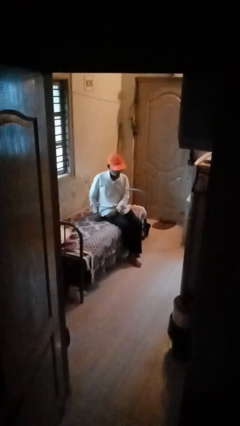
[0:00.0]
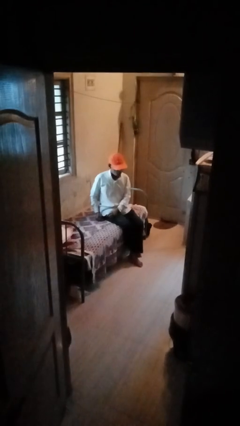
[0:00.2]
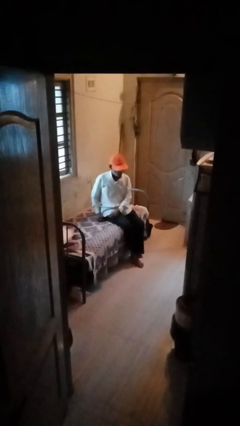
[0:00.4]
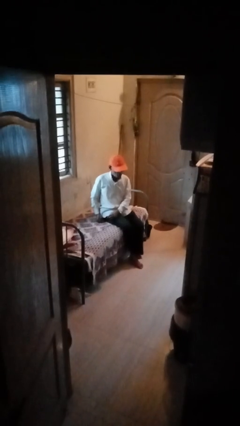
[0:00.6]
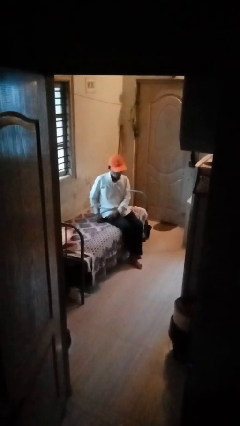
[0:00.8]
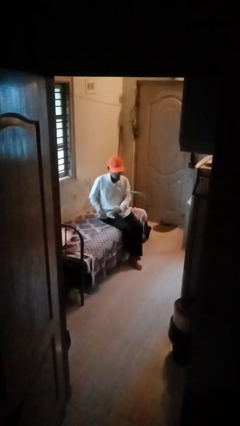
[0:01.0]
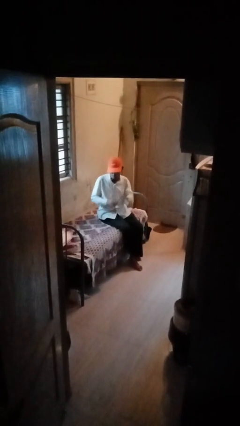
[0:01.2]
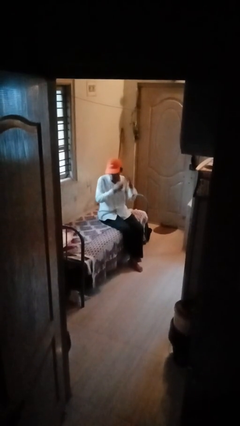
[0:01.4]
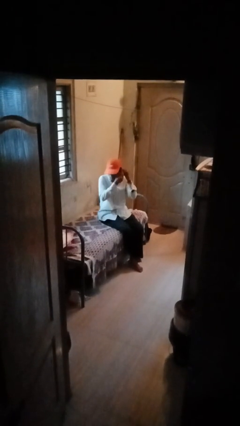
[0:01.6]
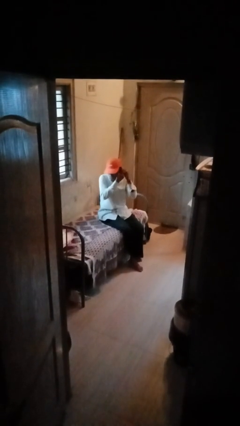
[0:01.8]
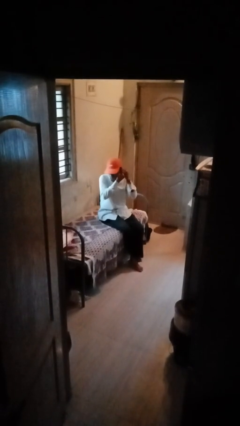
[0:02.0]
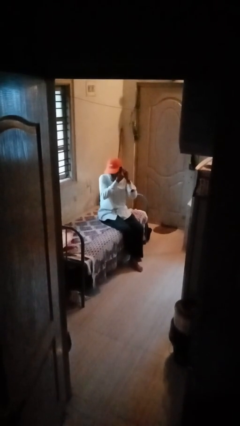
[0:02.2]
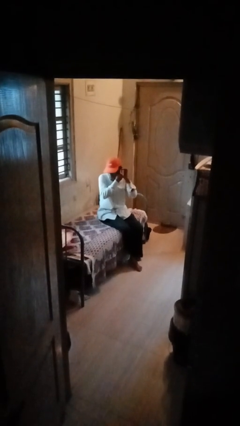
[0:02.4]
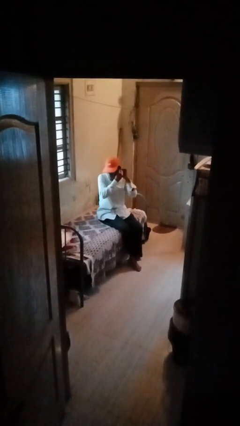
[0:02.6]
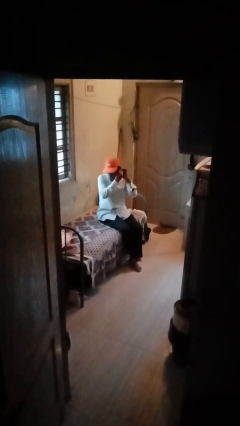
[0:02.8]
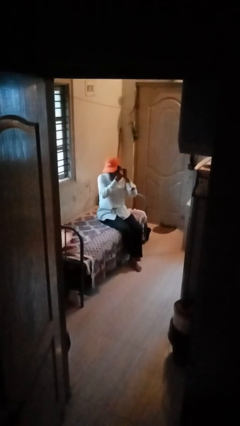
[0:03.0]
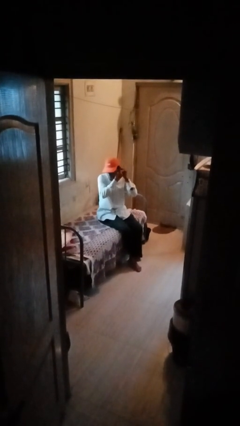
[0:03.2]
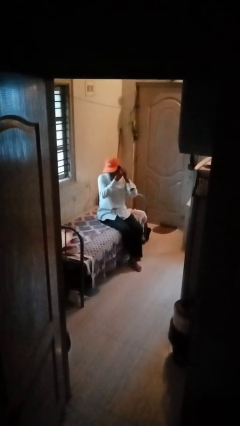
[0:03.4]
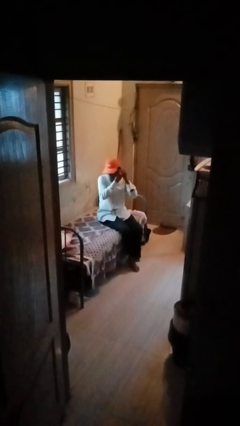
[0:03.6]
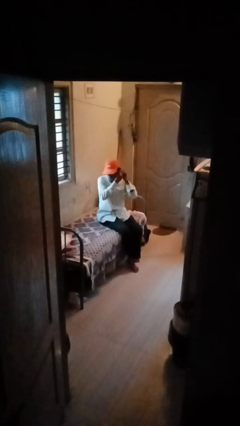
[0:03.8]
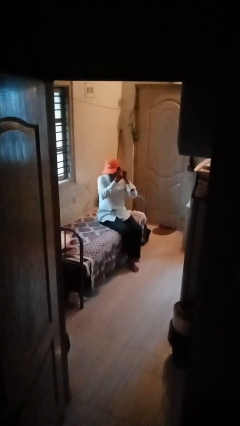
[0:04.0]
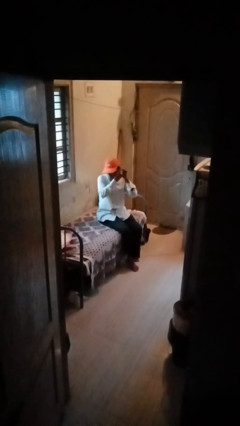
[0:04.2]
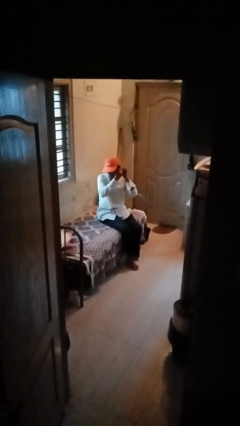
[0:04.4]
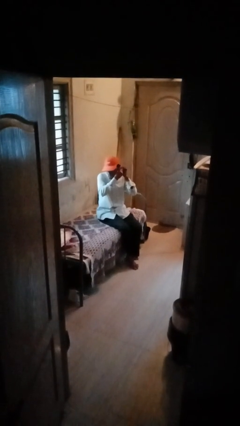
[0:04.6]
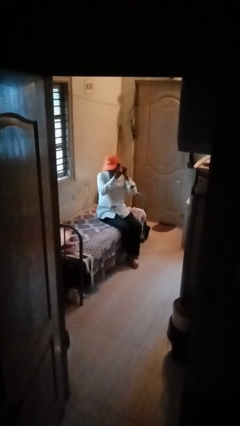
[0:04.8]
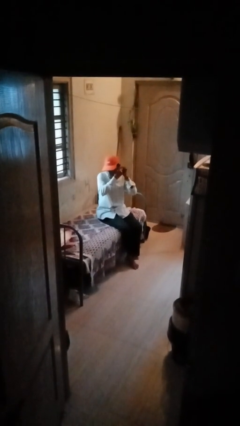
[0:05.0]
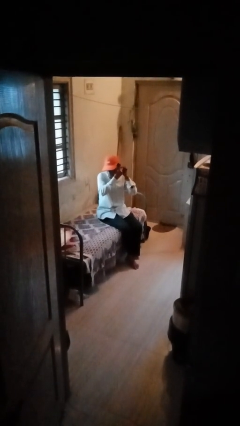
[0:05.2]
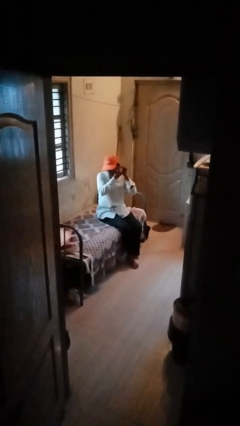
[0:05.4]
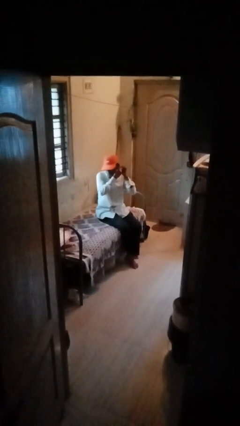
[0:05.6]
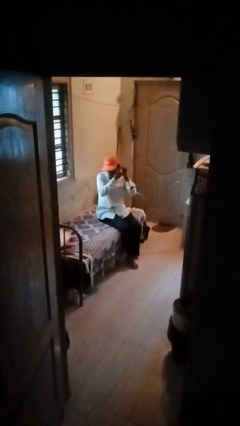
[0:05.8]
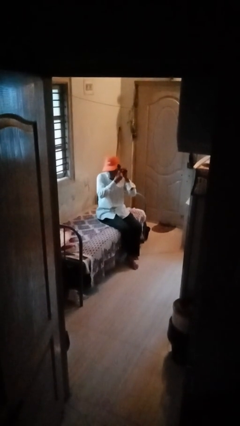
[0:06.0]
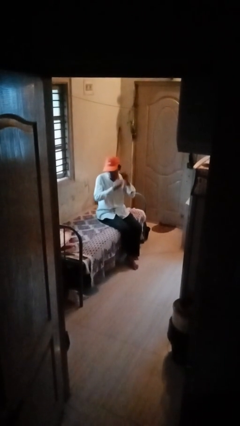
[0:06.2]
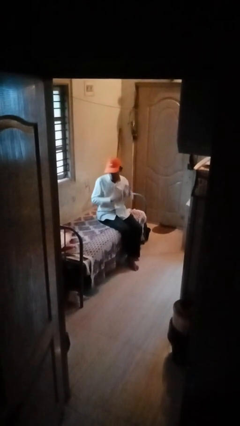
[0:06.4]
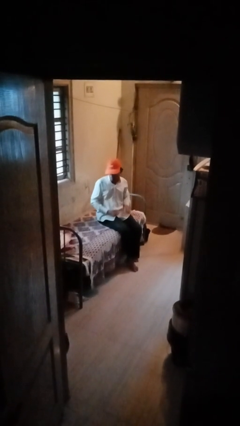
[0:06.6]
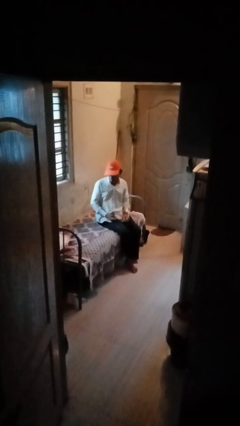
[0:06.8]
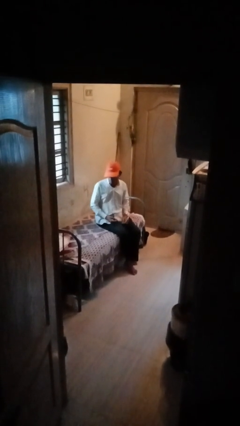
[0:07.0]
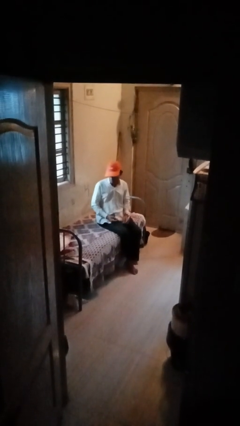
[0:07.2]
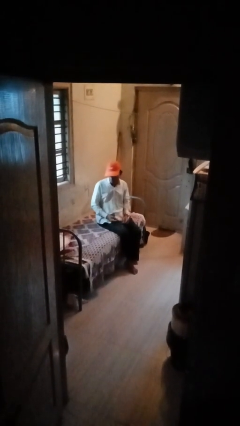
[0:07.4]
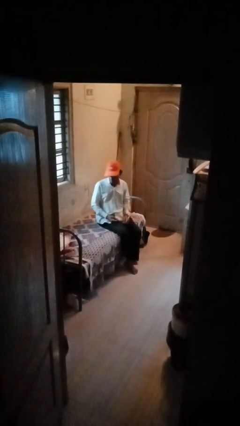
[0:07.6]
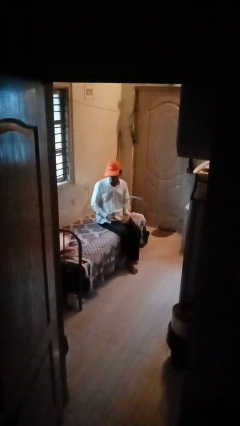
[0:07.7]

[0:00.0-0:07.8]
person puts on earrings

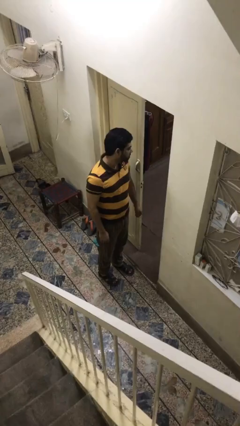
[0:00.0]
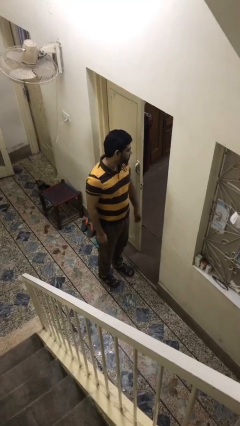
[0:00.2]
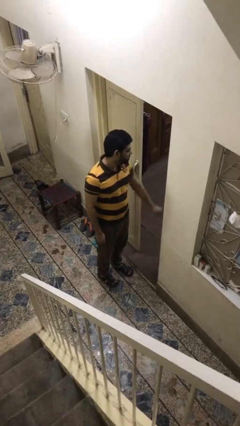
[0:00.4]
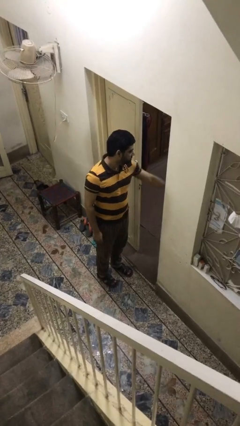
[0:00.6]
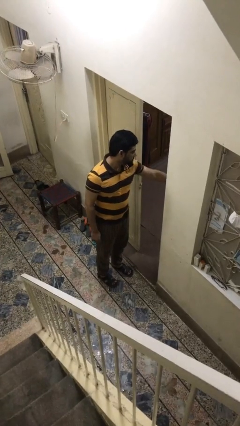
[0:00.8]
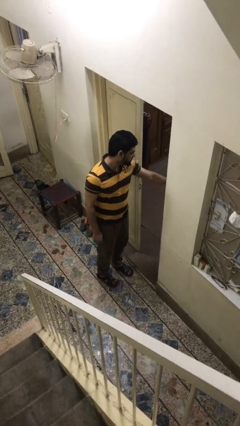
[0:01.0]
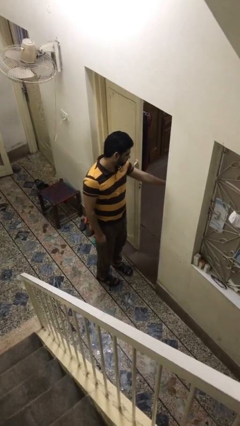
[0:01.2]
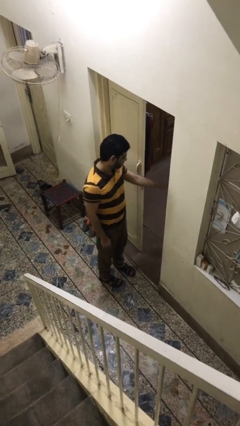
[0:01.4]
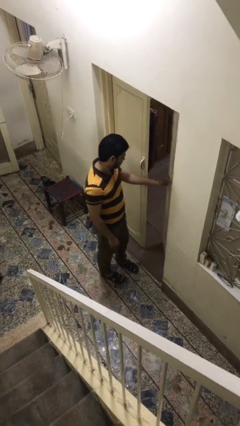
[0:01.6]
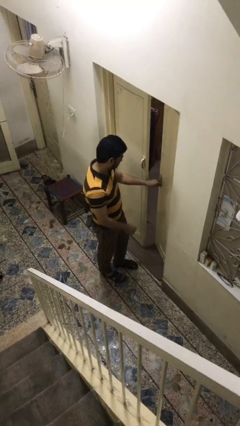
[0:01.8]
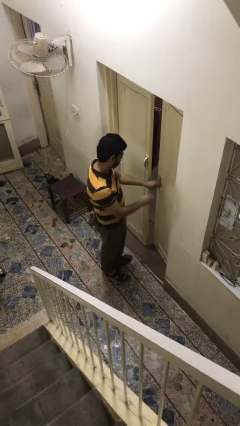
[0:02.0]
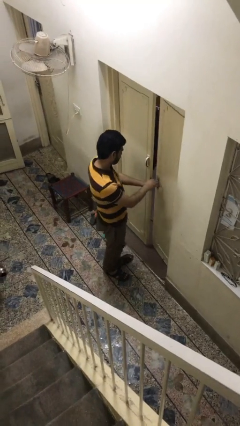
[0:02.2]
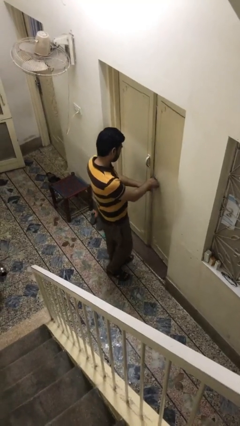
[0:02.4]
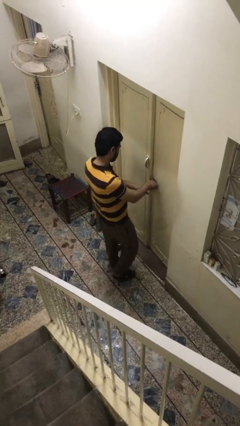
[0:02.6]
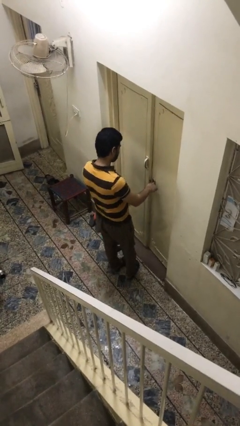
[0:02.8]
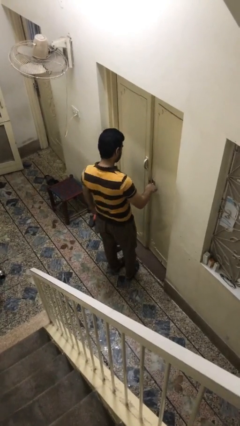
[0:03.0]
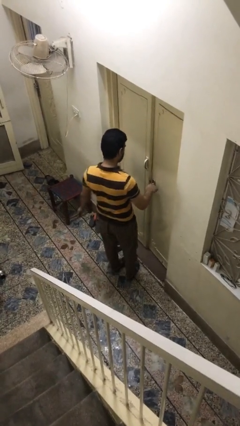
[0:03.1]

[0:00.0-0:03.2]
person closes facility door

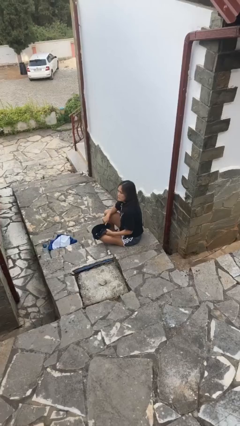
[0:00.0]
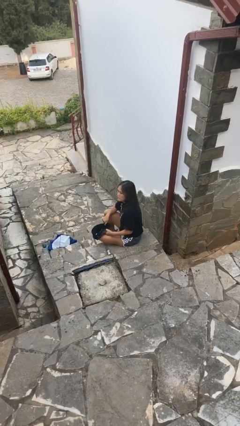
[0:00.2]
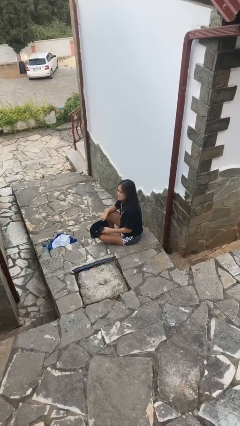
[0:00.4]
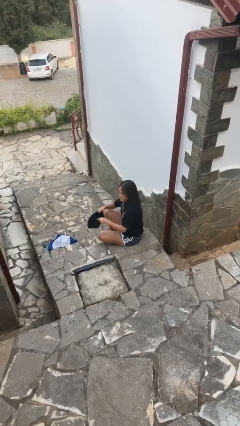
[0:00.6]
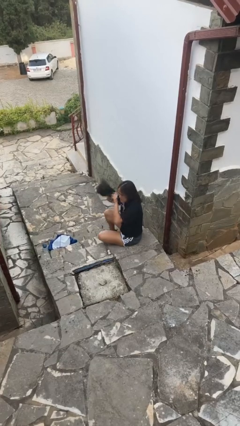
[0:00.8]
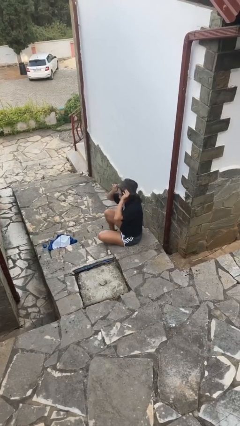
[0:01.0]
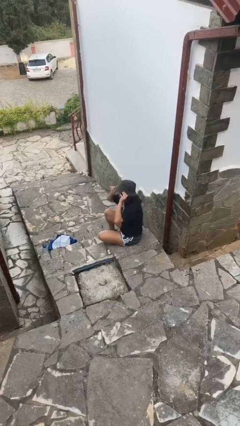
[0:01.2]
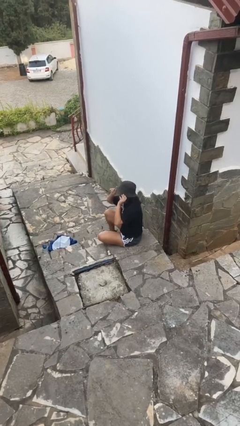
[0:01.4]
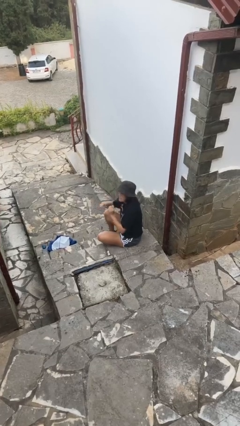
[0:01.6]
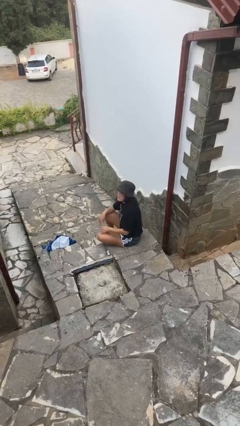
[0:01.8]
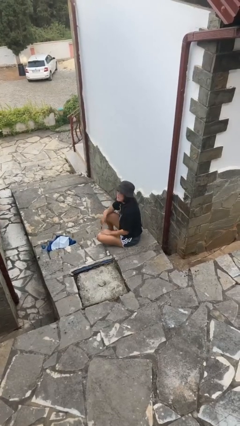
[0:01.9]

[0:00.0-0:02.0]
person puts on hat

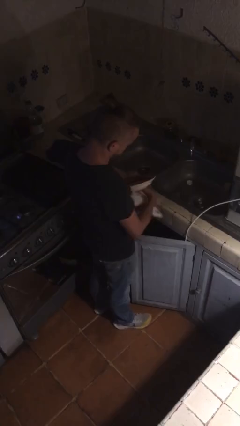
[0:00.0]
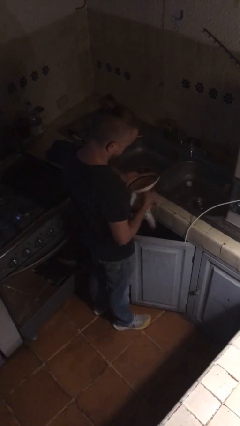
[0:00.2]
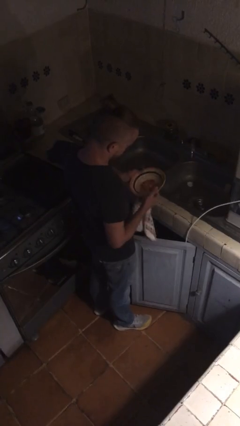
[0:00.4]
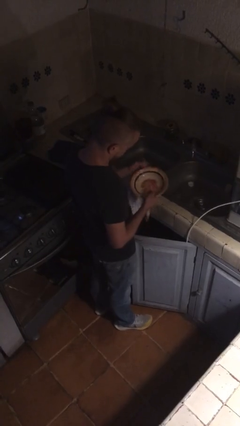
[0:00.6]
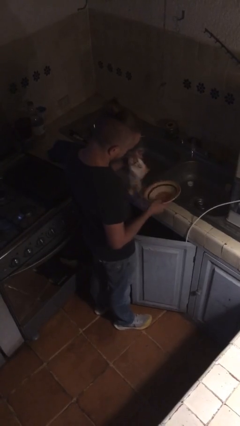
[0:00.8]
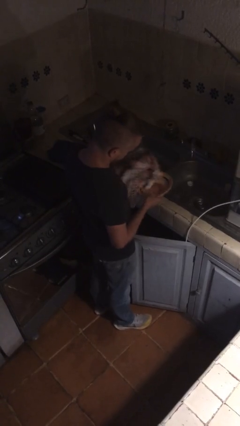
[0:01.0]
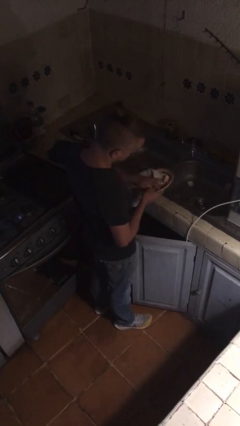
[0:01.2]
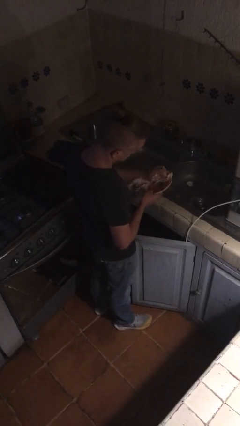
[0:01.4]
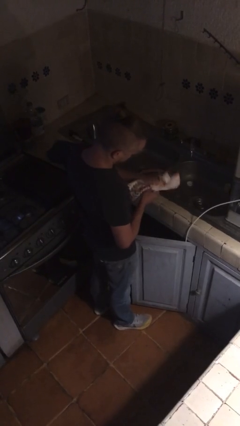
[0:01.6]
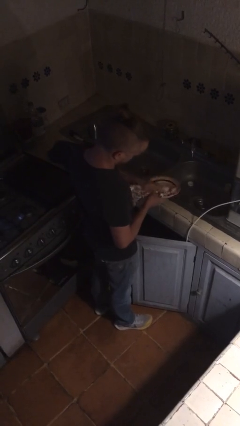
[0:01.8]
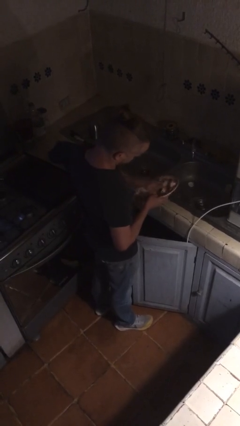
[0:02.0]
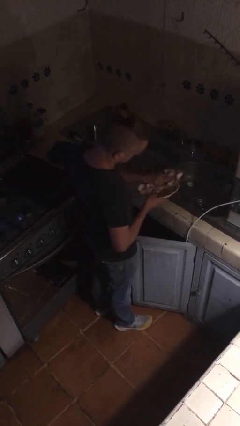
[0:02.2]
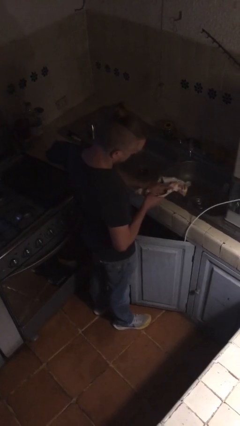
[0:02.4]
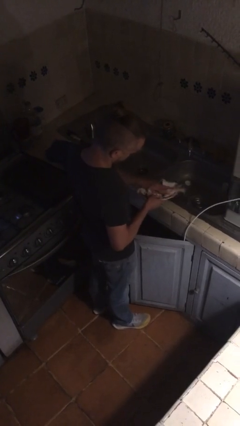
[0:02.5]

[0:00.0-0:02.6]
person dries dish

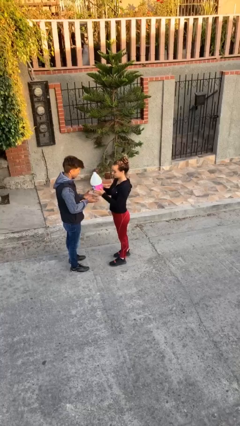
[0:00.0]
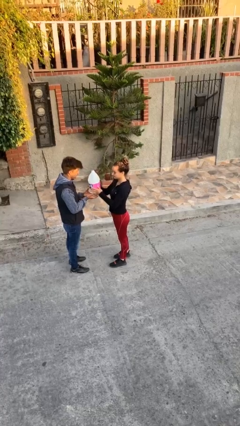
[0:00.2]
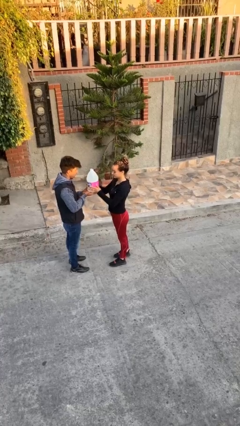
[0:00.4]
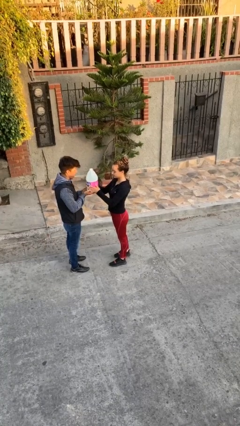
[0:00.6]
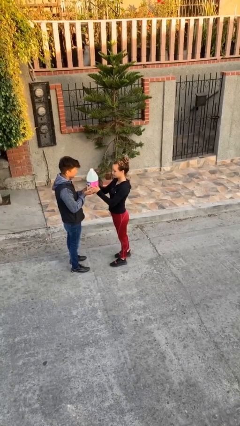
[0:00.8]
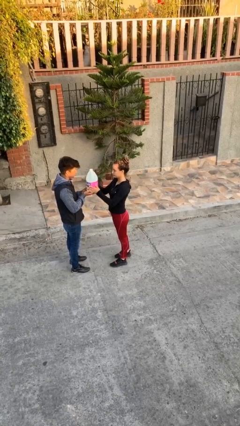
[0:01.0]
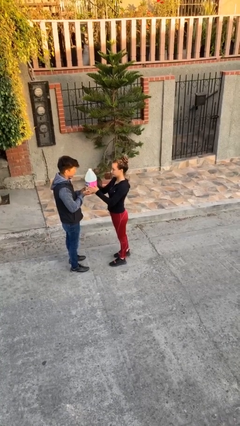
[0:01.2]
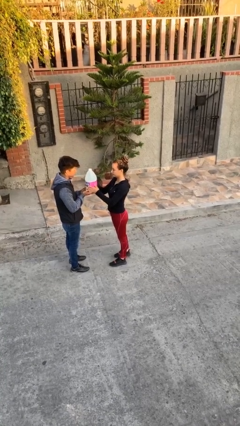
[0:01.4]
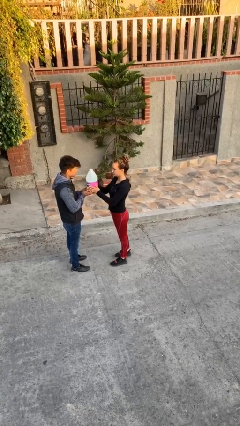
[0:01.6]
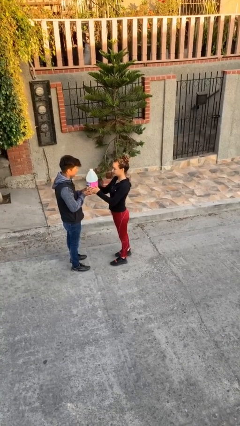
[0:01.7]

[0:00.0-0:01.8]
person transfers object to person

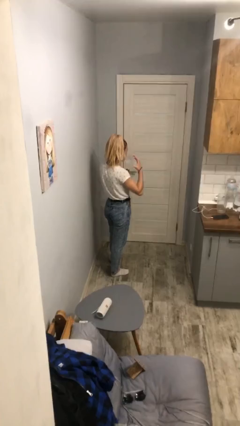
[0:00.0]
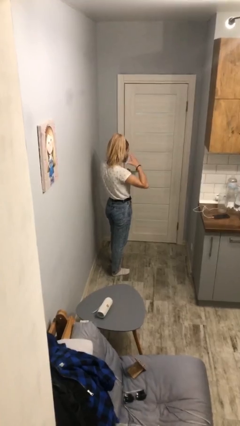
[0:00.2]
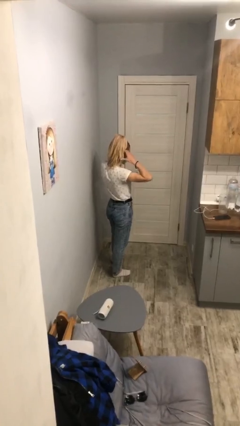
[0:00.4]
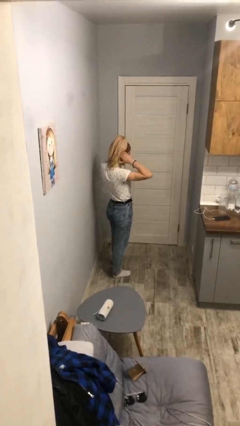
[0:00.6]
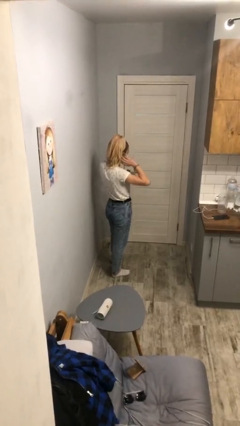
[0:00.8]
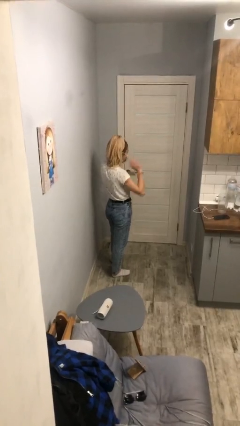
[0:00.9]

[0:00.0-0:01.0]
person puts on facemask
